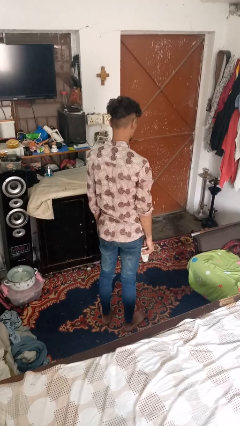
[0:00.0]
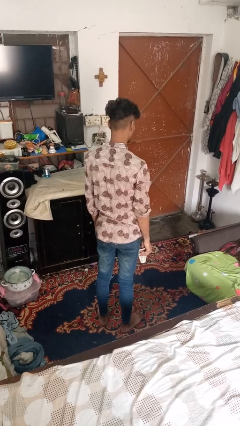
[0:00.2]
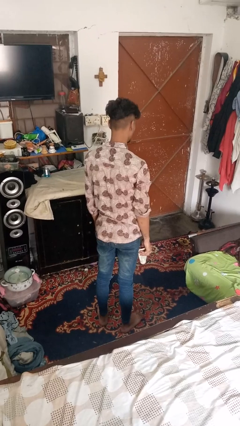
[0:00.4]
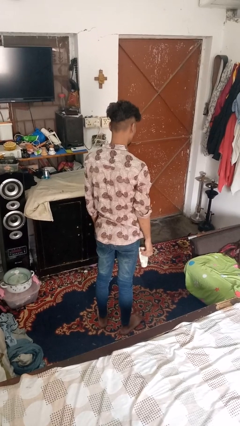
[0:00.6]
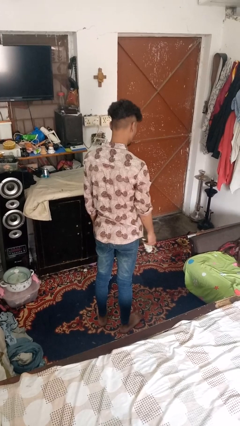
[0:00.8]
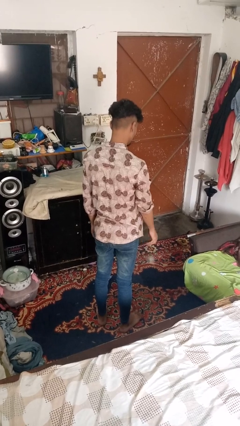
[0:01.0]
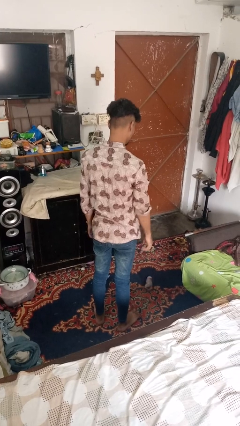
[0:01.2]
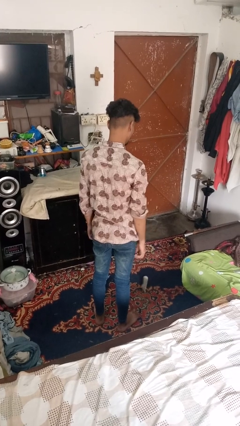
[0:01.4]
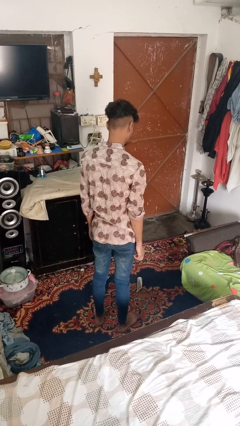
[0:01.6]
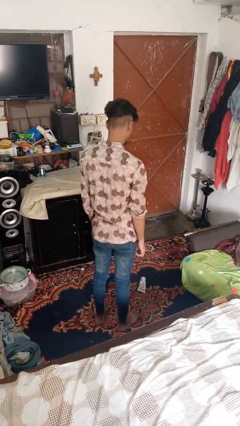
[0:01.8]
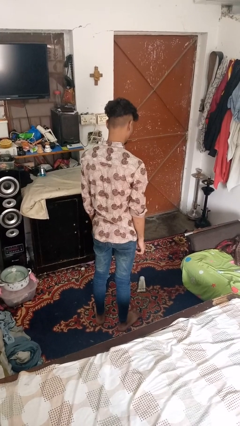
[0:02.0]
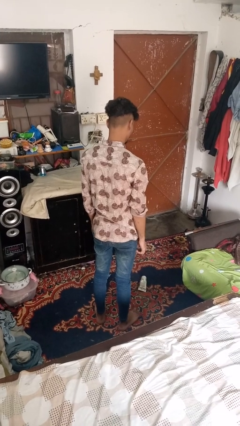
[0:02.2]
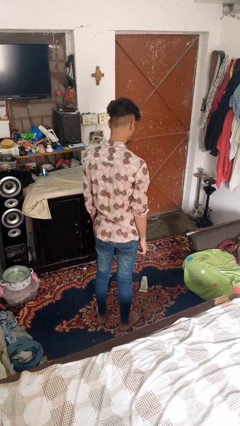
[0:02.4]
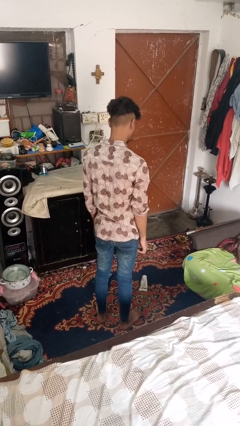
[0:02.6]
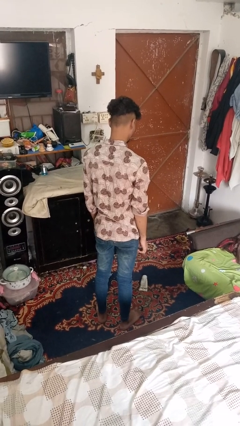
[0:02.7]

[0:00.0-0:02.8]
person throws object to ground

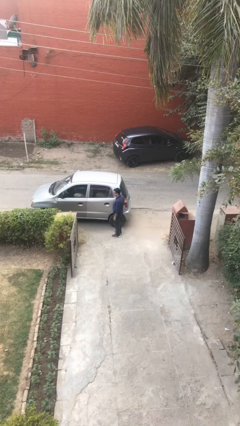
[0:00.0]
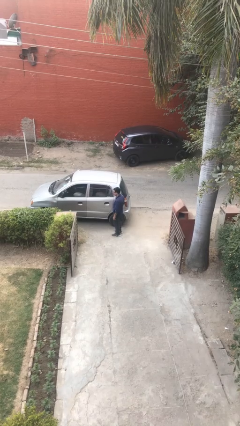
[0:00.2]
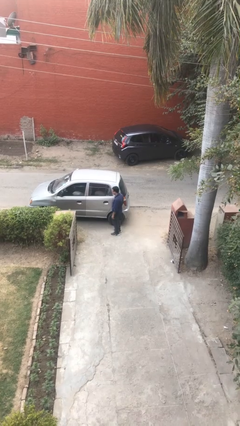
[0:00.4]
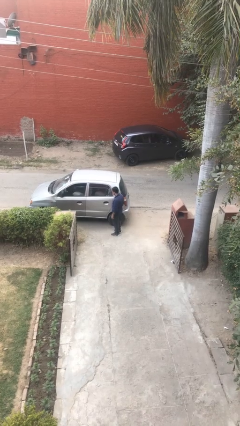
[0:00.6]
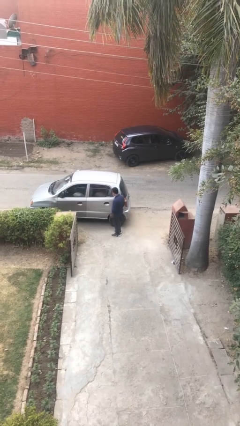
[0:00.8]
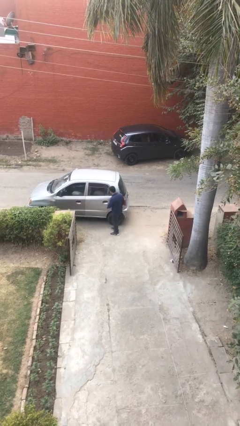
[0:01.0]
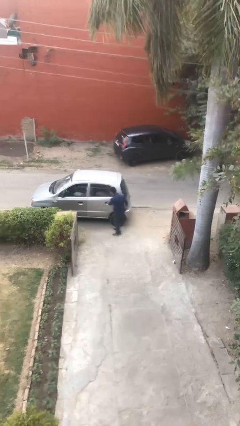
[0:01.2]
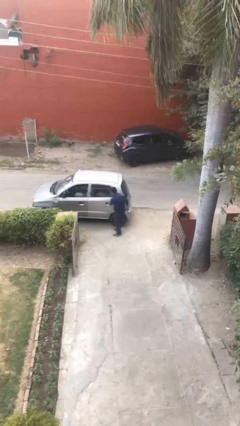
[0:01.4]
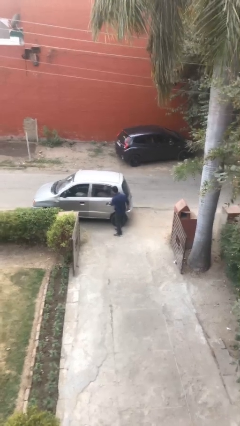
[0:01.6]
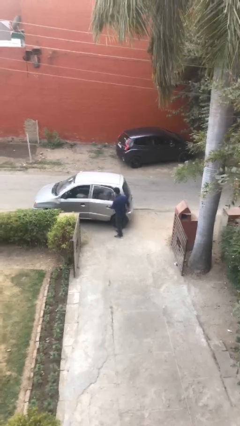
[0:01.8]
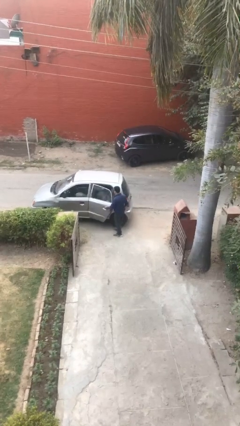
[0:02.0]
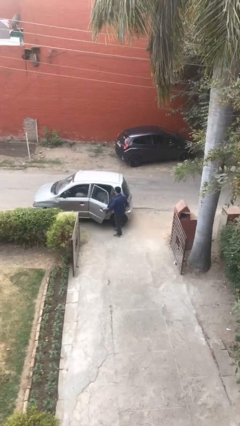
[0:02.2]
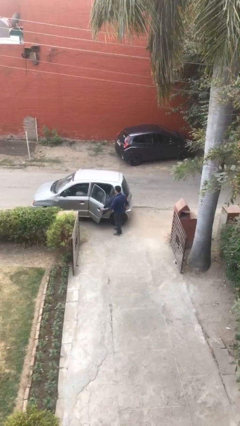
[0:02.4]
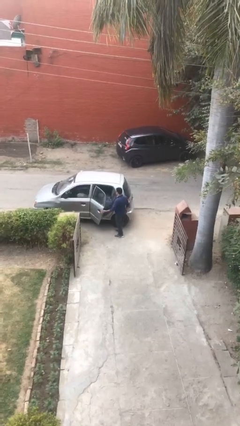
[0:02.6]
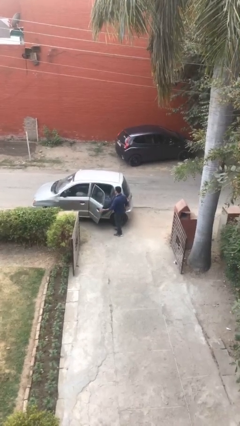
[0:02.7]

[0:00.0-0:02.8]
person opens car door

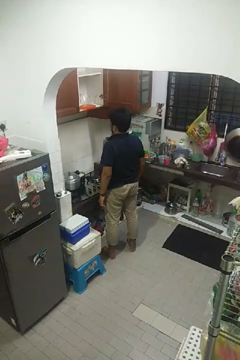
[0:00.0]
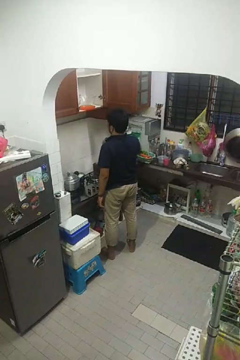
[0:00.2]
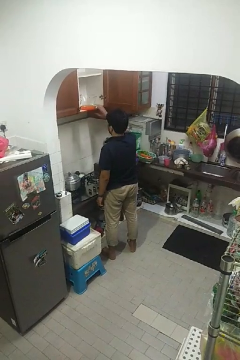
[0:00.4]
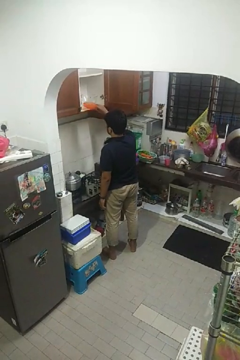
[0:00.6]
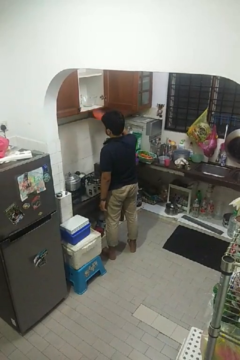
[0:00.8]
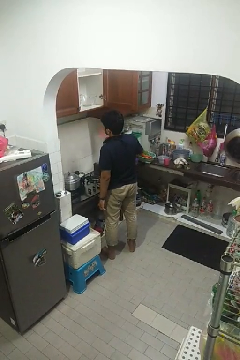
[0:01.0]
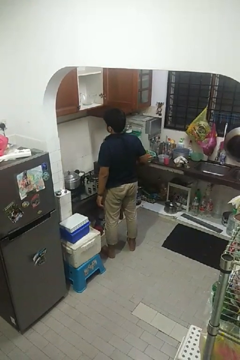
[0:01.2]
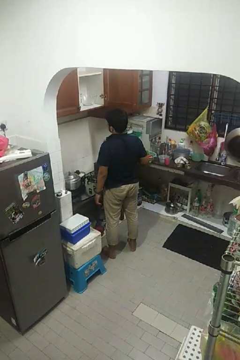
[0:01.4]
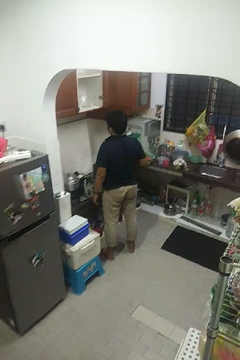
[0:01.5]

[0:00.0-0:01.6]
person takes object from cabinet

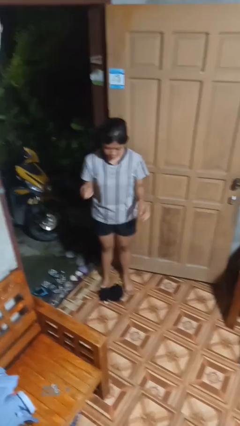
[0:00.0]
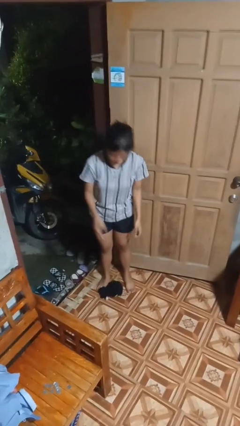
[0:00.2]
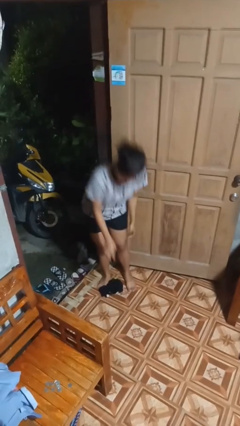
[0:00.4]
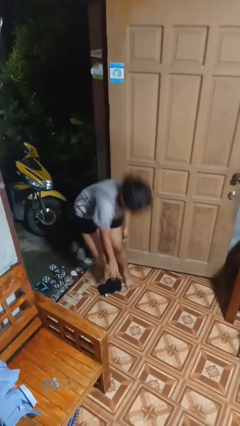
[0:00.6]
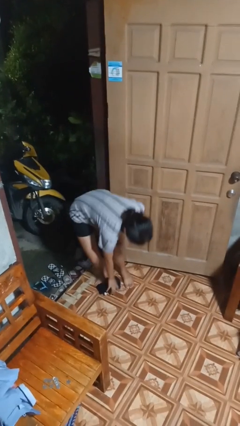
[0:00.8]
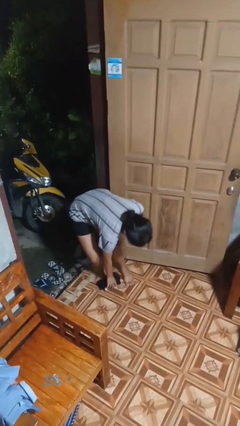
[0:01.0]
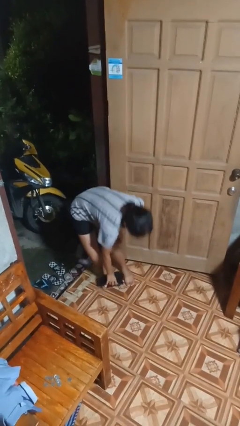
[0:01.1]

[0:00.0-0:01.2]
person picks up object from floor

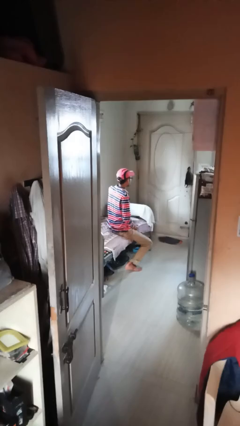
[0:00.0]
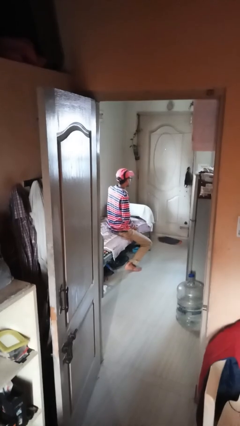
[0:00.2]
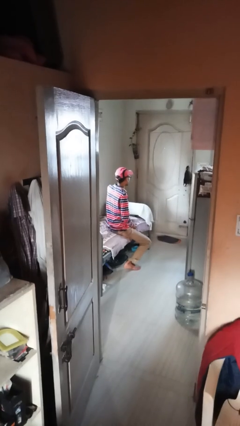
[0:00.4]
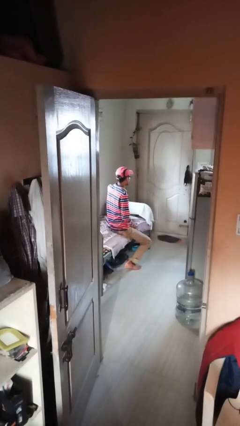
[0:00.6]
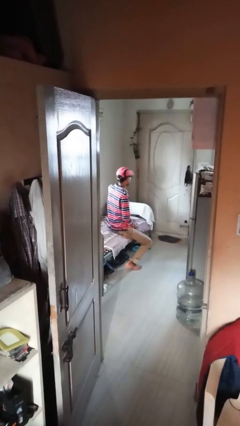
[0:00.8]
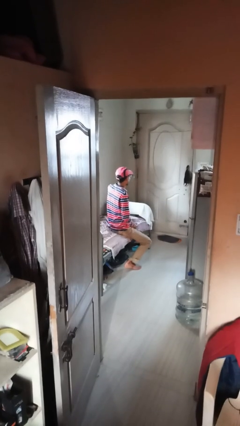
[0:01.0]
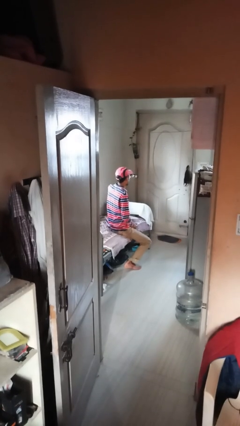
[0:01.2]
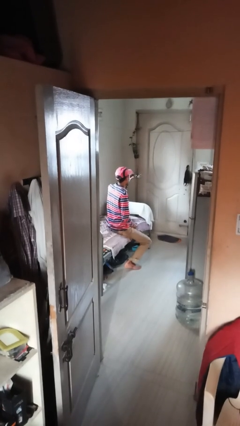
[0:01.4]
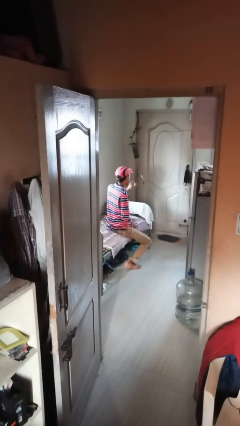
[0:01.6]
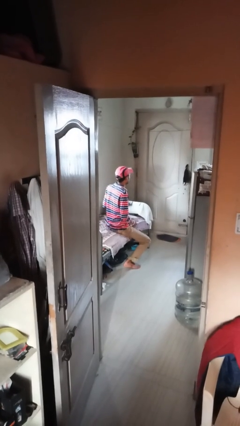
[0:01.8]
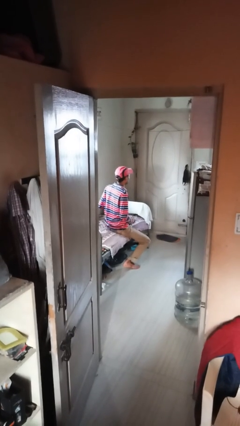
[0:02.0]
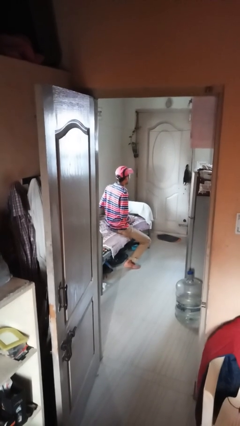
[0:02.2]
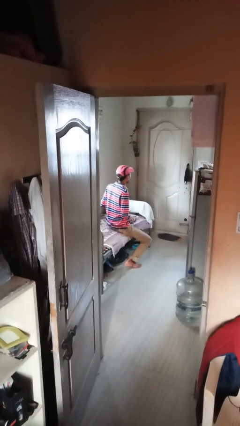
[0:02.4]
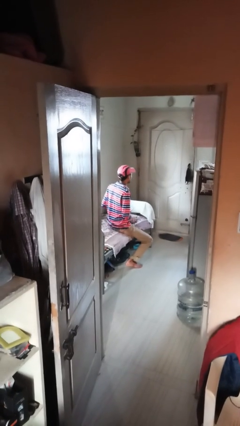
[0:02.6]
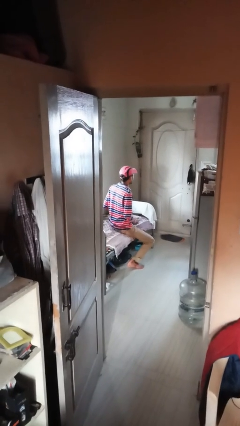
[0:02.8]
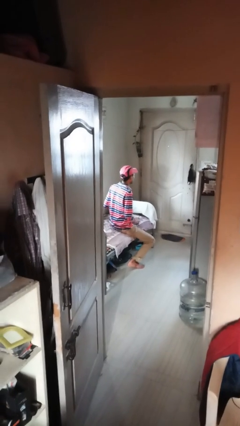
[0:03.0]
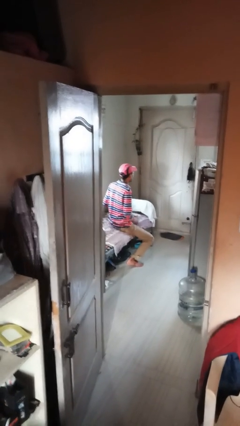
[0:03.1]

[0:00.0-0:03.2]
person takes off glasses

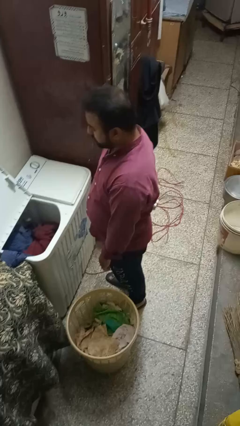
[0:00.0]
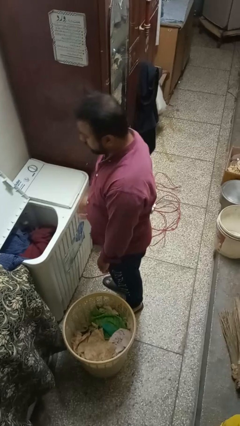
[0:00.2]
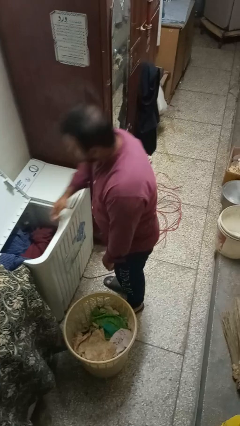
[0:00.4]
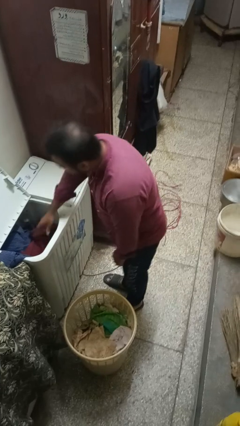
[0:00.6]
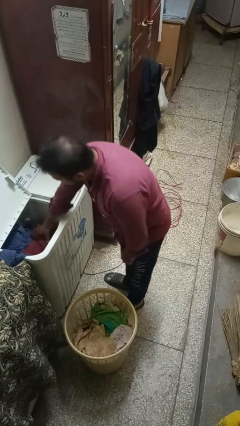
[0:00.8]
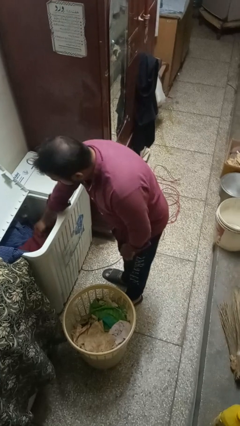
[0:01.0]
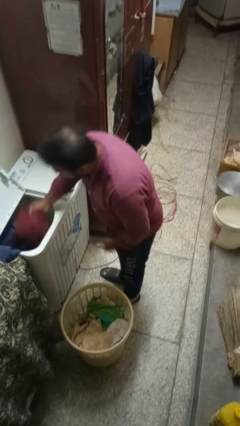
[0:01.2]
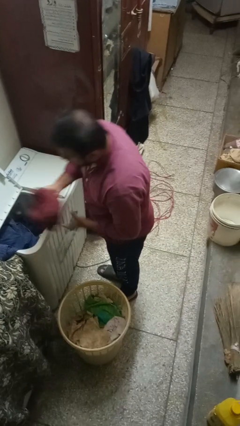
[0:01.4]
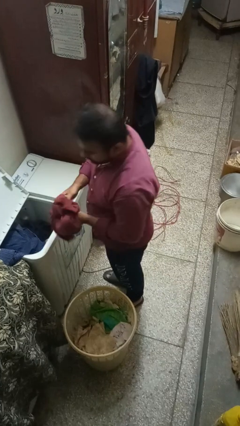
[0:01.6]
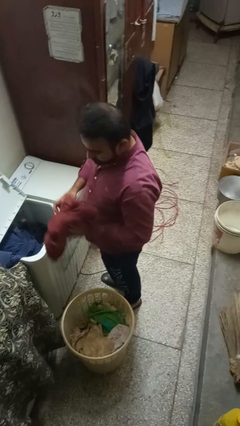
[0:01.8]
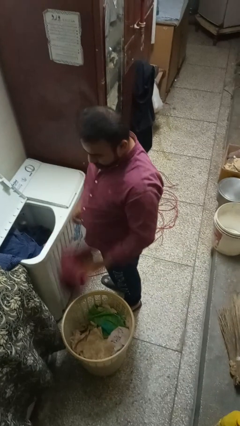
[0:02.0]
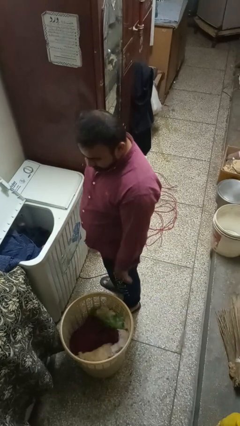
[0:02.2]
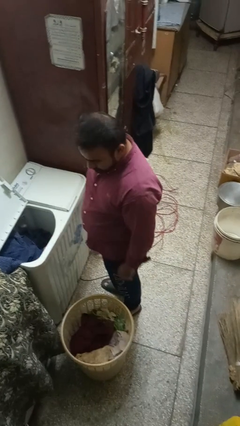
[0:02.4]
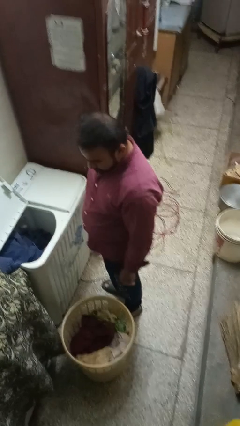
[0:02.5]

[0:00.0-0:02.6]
person unloads clotheswasher

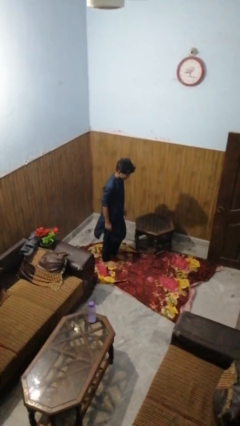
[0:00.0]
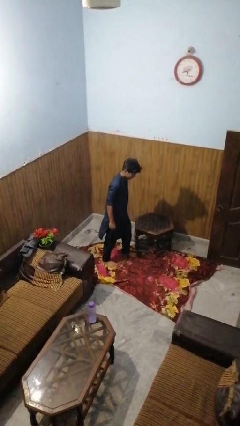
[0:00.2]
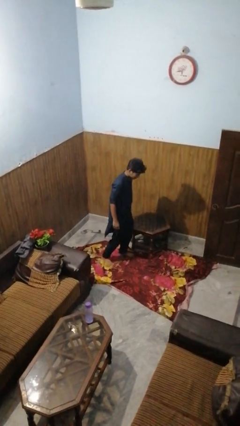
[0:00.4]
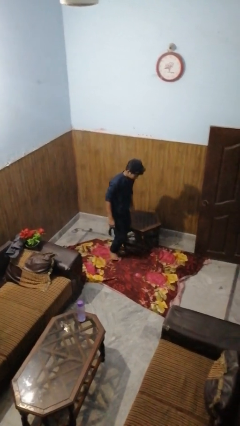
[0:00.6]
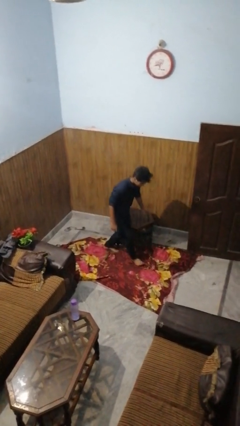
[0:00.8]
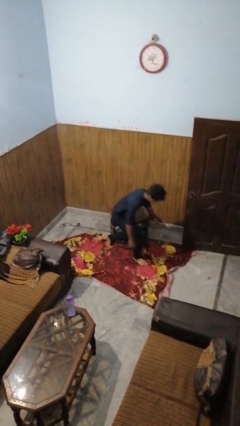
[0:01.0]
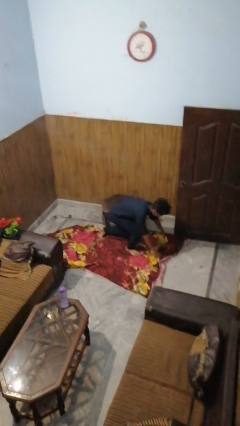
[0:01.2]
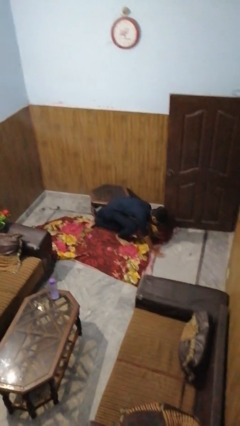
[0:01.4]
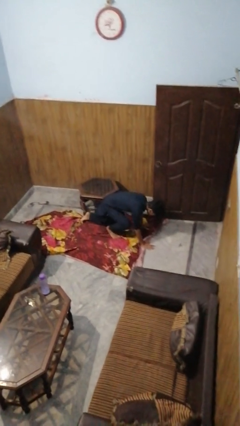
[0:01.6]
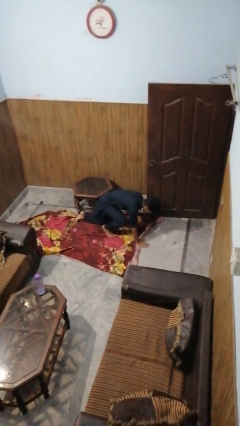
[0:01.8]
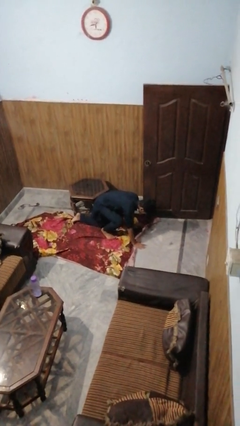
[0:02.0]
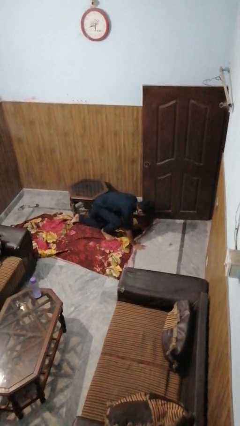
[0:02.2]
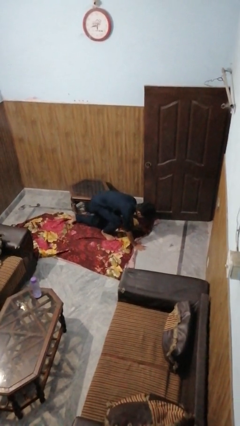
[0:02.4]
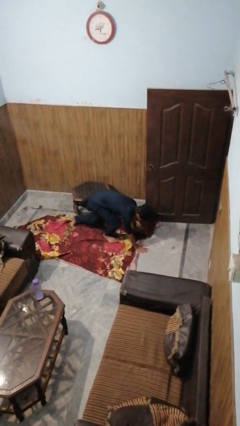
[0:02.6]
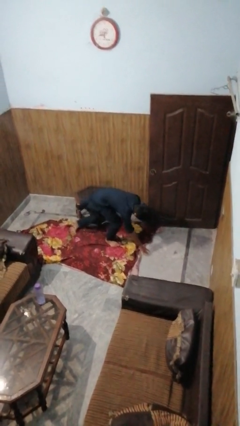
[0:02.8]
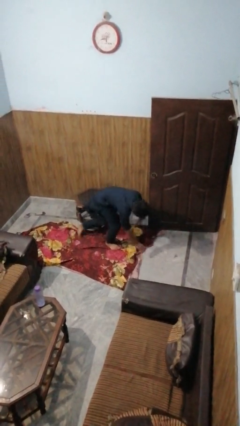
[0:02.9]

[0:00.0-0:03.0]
person bumps into table

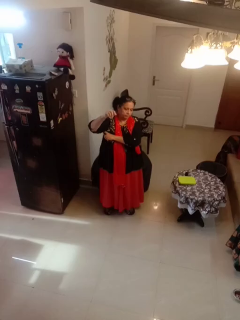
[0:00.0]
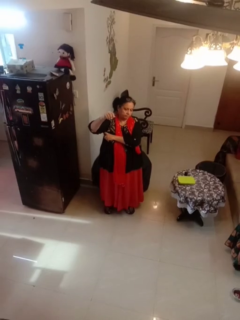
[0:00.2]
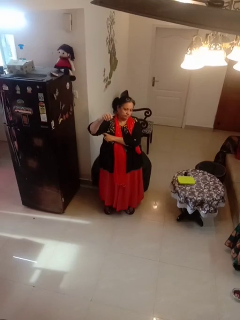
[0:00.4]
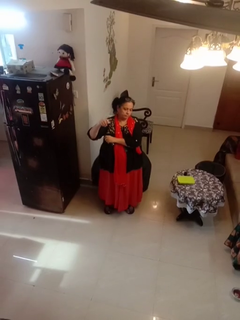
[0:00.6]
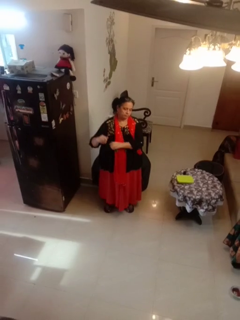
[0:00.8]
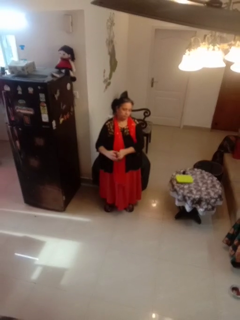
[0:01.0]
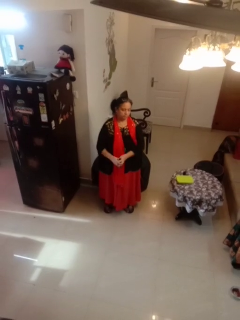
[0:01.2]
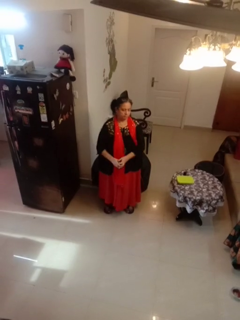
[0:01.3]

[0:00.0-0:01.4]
person applies deodorant
